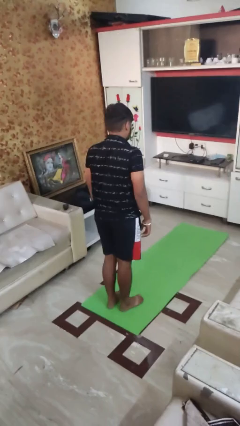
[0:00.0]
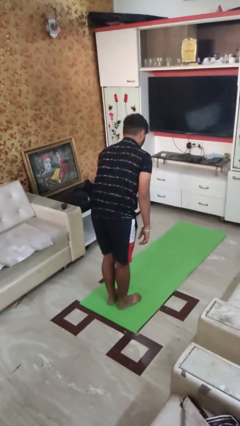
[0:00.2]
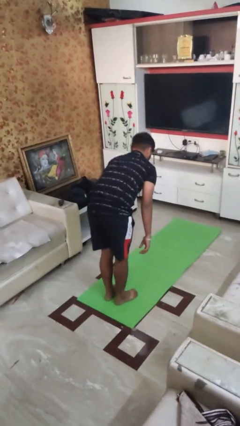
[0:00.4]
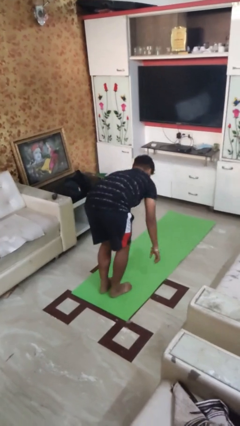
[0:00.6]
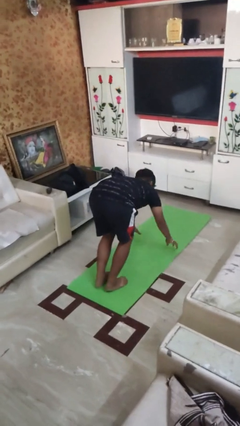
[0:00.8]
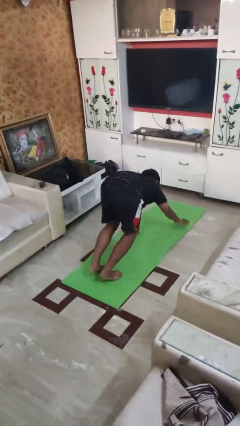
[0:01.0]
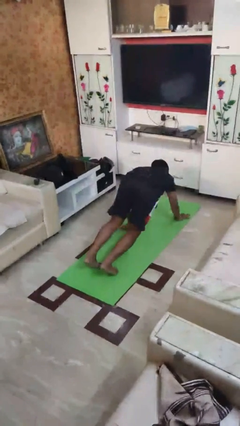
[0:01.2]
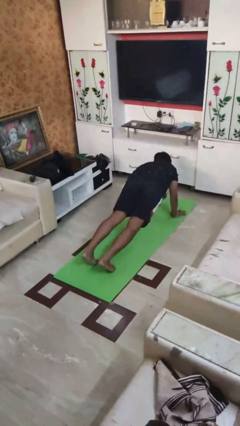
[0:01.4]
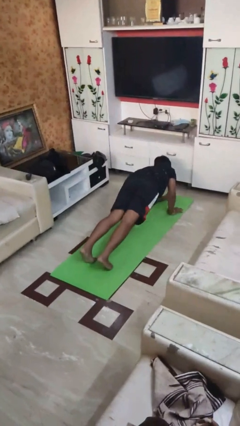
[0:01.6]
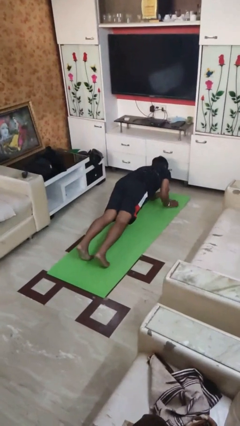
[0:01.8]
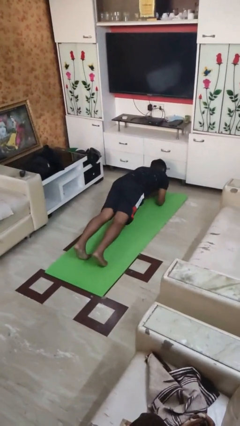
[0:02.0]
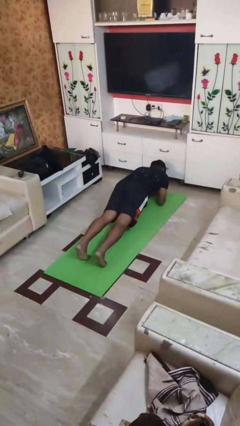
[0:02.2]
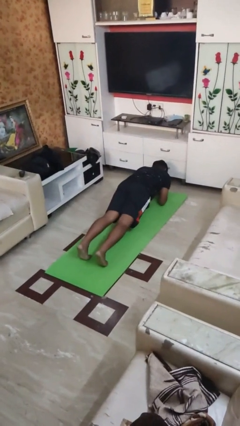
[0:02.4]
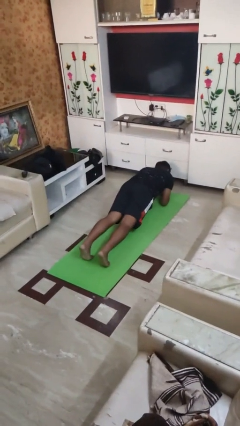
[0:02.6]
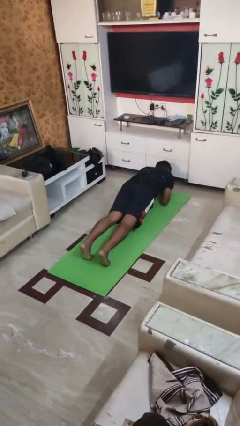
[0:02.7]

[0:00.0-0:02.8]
person exercises with plank

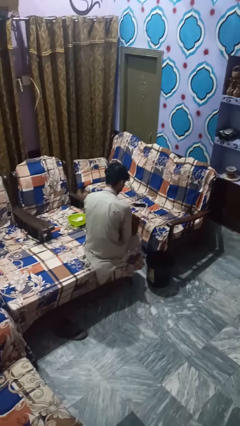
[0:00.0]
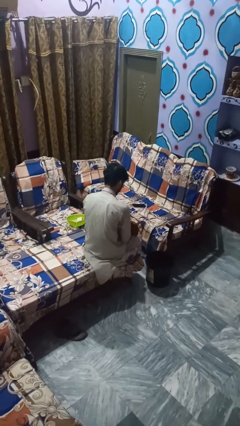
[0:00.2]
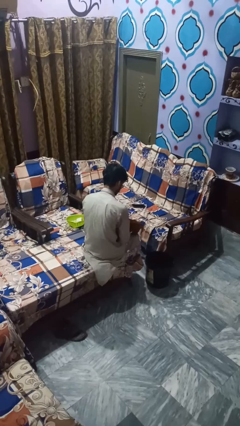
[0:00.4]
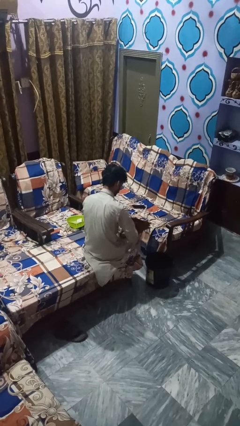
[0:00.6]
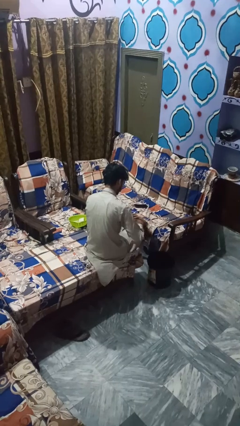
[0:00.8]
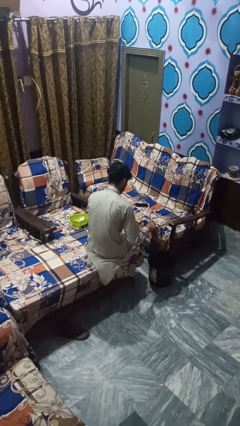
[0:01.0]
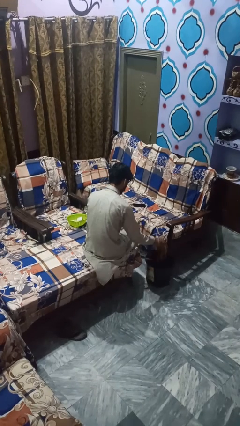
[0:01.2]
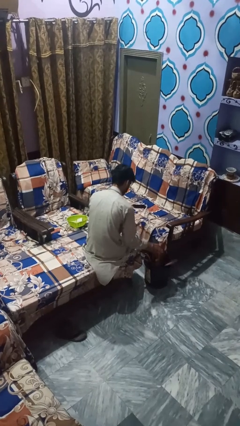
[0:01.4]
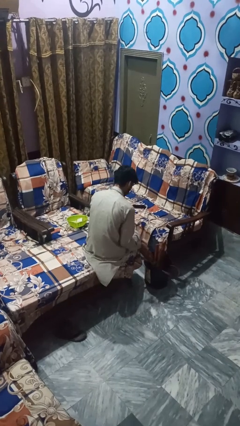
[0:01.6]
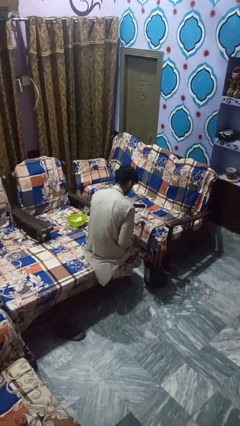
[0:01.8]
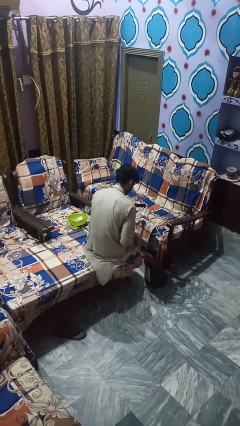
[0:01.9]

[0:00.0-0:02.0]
person puts object into basket

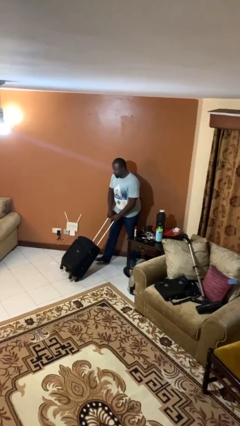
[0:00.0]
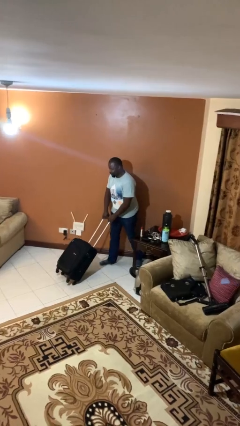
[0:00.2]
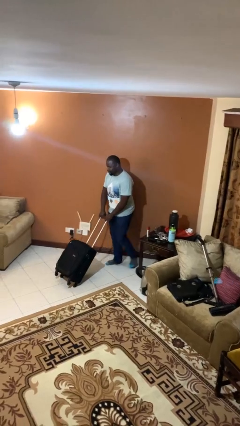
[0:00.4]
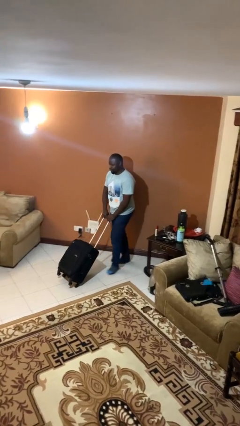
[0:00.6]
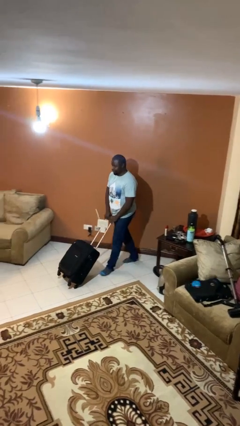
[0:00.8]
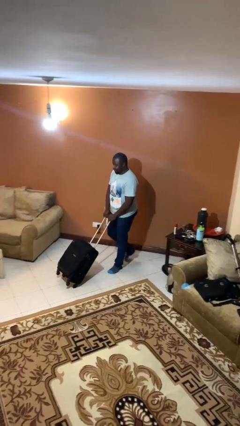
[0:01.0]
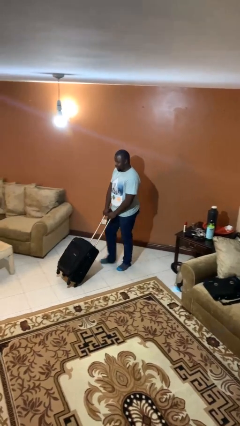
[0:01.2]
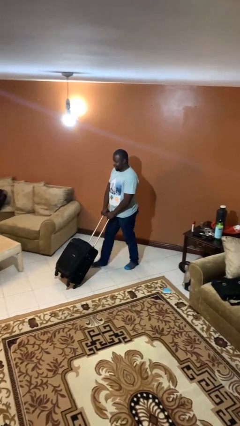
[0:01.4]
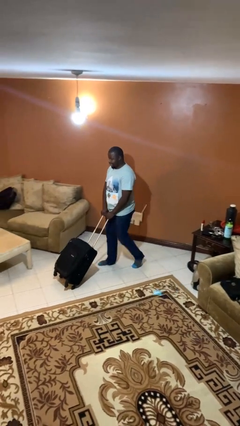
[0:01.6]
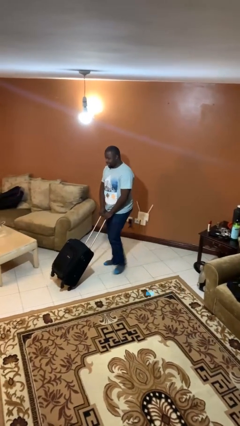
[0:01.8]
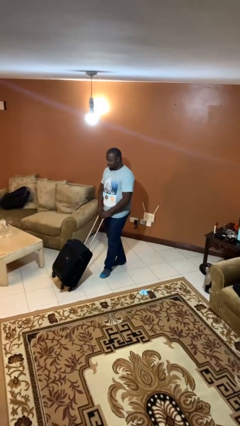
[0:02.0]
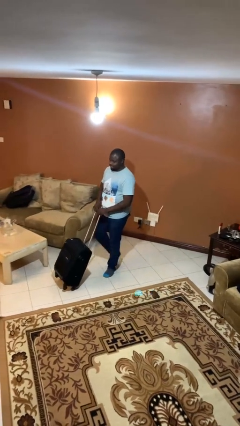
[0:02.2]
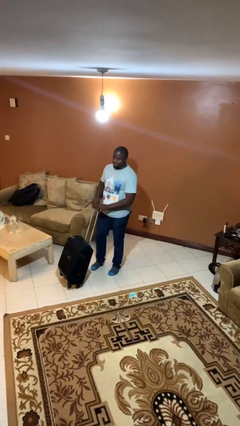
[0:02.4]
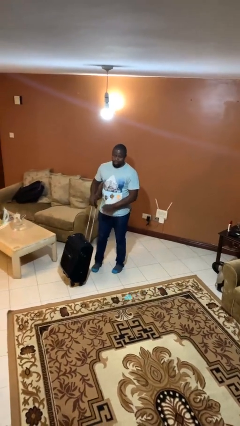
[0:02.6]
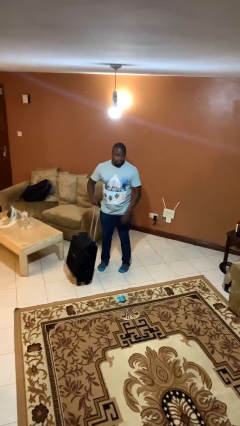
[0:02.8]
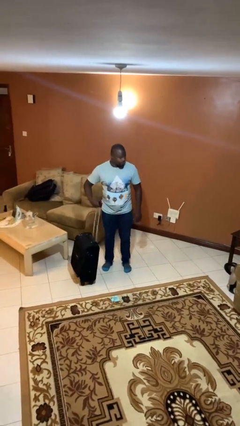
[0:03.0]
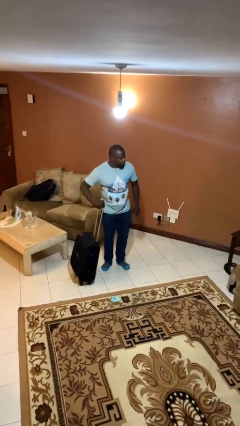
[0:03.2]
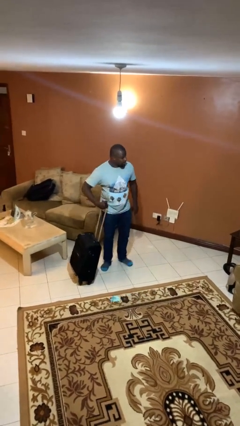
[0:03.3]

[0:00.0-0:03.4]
person pushes wheeled cart

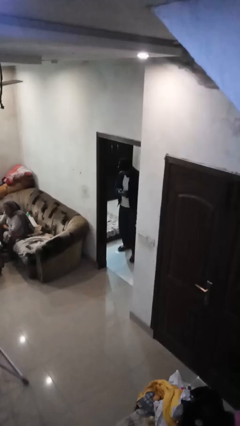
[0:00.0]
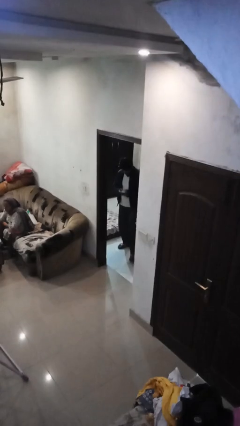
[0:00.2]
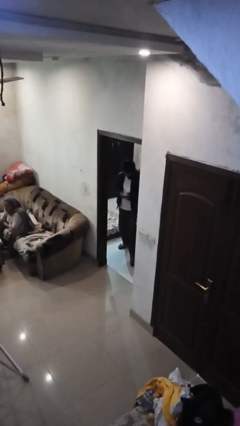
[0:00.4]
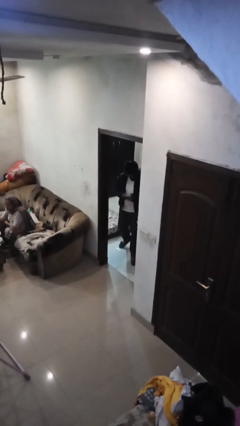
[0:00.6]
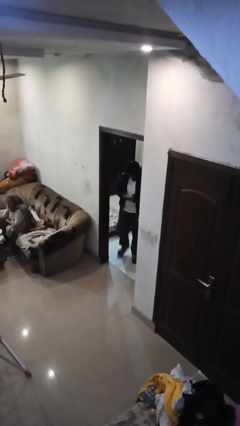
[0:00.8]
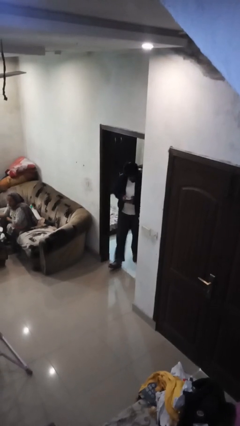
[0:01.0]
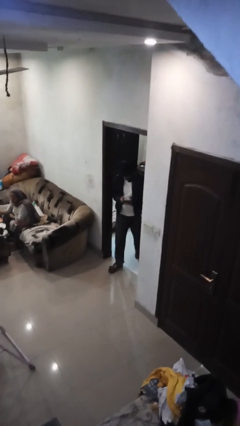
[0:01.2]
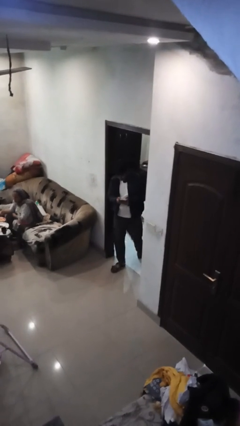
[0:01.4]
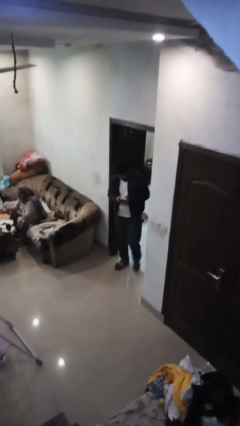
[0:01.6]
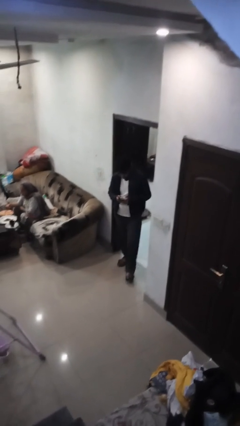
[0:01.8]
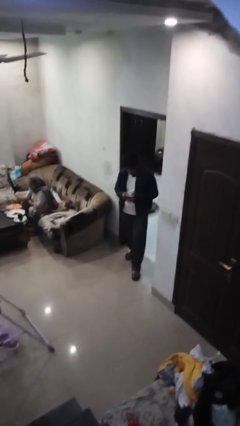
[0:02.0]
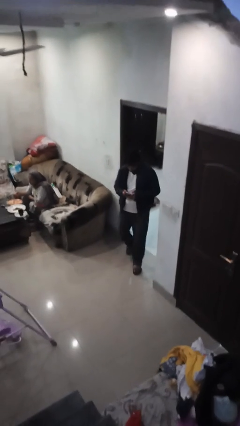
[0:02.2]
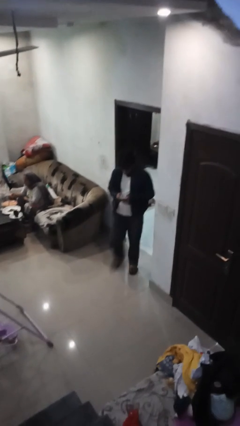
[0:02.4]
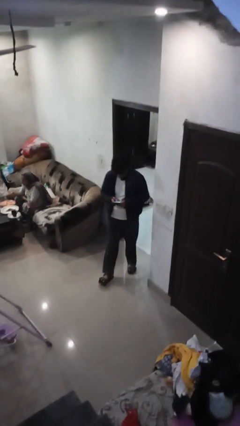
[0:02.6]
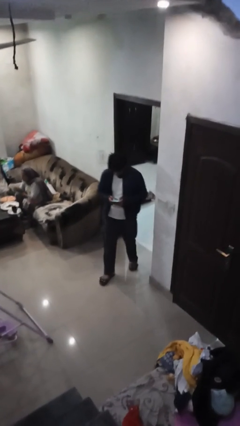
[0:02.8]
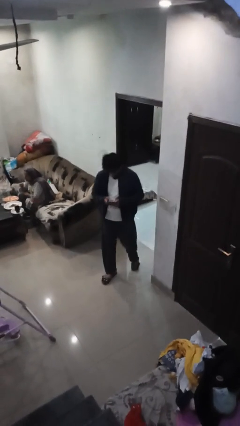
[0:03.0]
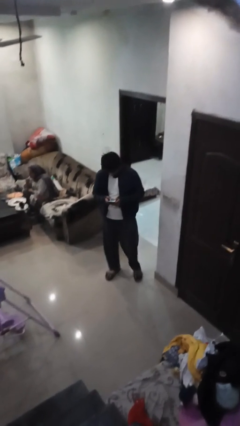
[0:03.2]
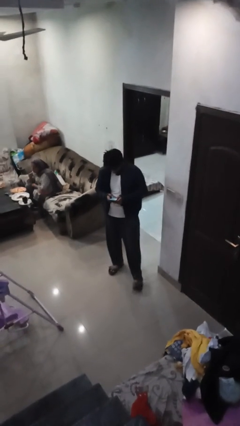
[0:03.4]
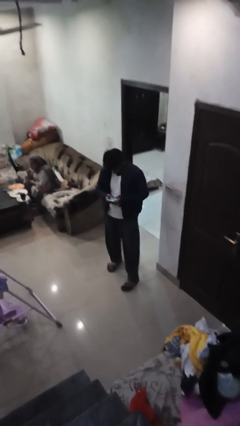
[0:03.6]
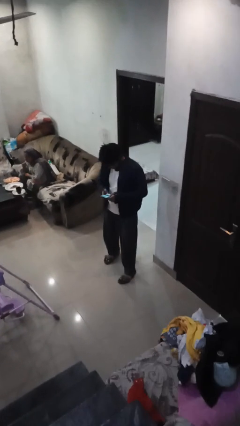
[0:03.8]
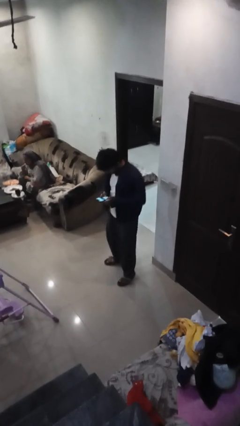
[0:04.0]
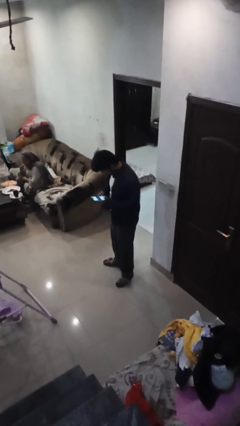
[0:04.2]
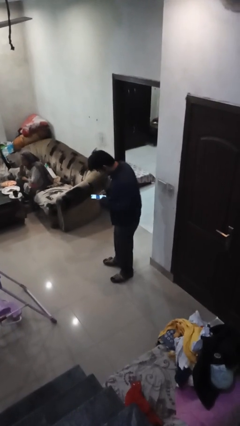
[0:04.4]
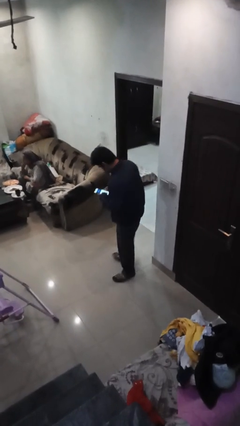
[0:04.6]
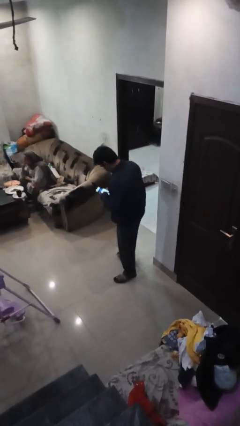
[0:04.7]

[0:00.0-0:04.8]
person enters scene through structure

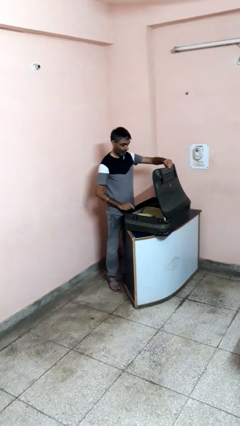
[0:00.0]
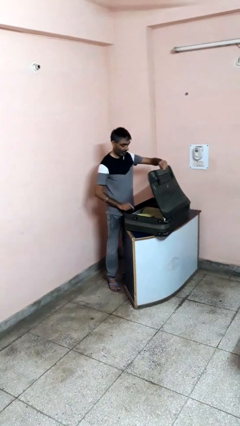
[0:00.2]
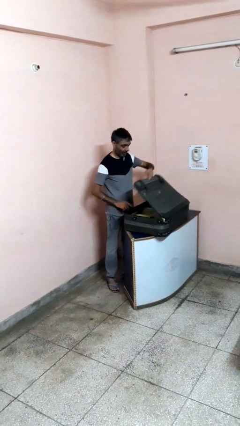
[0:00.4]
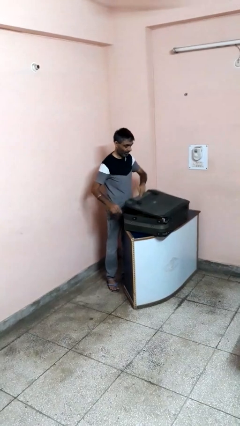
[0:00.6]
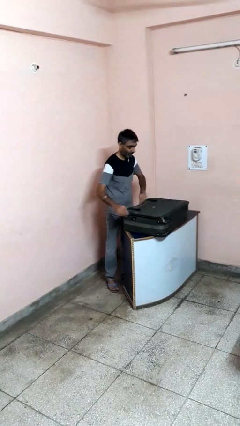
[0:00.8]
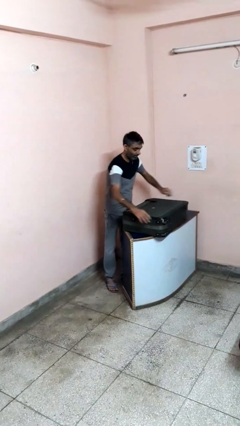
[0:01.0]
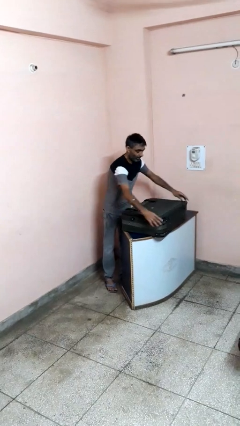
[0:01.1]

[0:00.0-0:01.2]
person closes suitcase

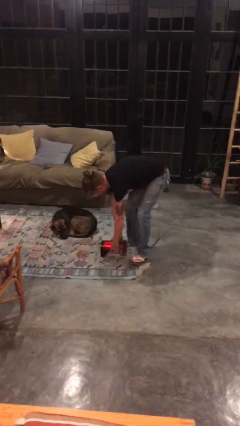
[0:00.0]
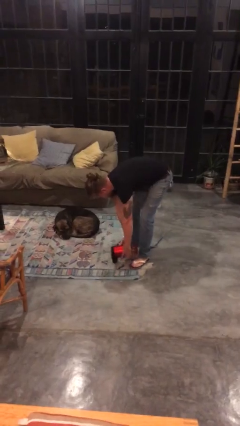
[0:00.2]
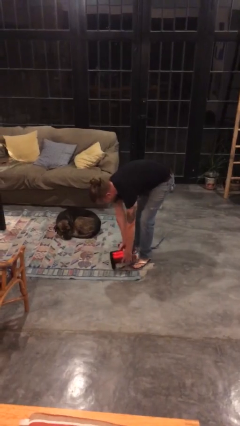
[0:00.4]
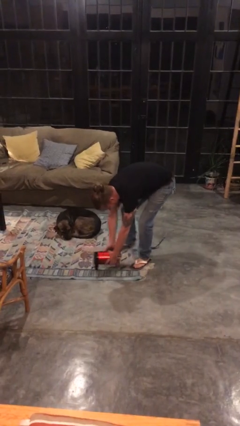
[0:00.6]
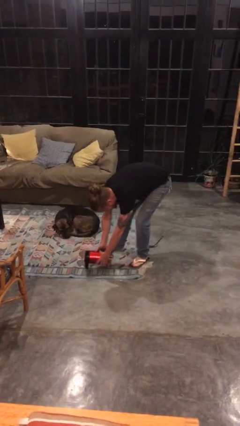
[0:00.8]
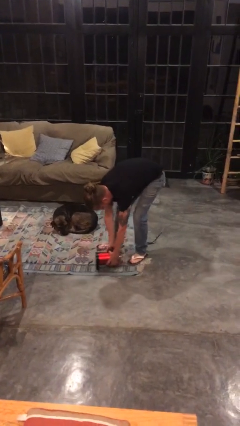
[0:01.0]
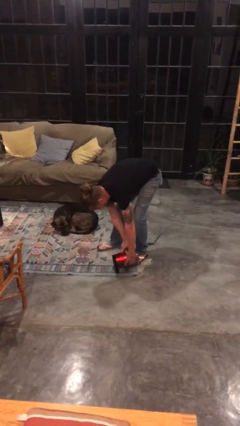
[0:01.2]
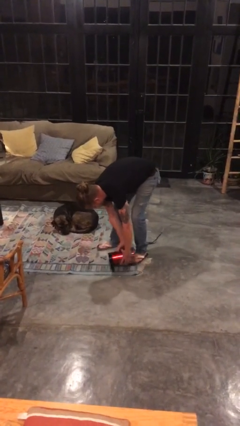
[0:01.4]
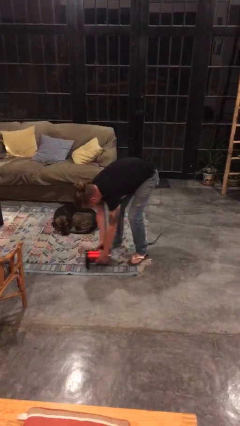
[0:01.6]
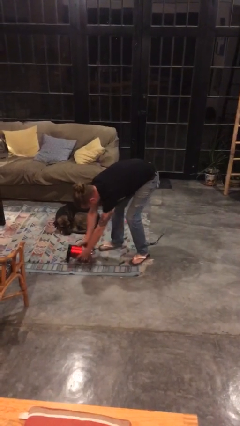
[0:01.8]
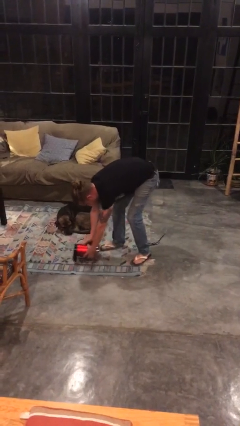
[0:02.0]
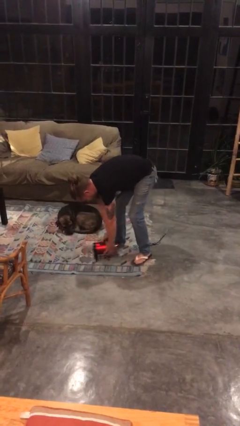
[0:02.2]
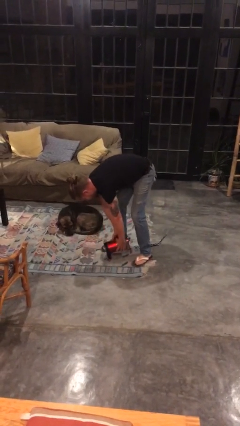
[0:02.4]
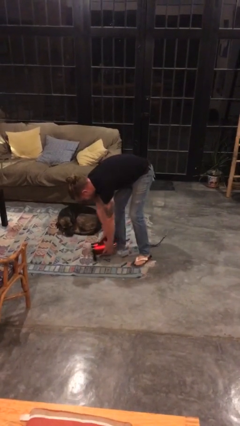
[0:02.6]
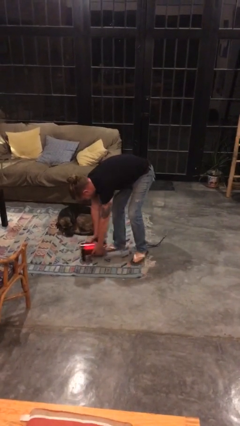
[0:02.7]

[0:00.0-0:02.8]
person vacuums carpet

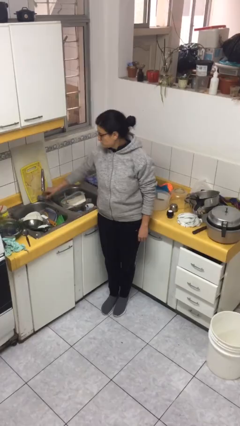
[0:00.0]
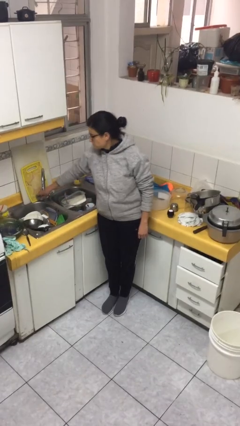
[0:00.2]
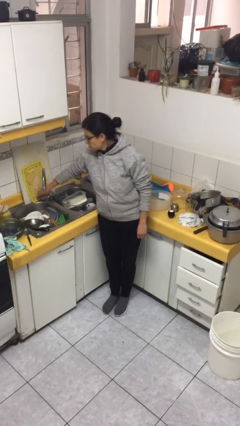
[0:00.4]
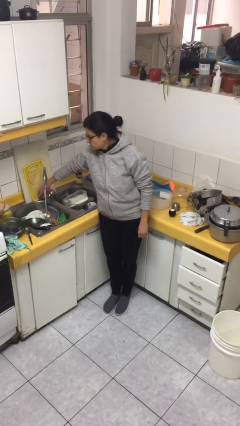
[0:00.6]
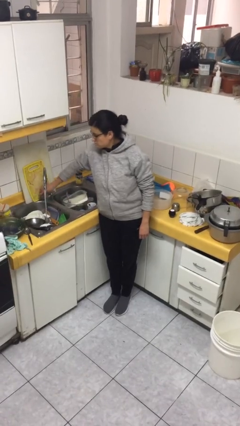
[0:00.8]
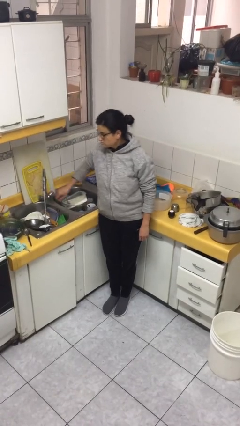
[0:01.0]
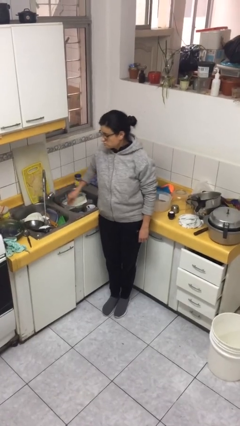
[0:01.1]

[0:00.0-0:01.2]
person turns on faucet
